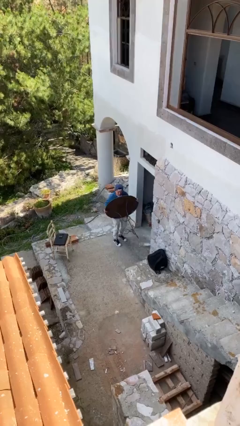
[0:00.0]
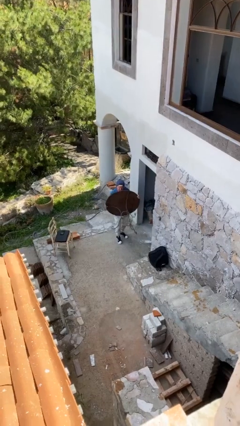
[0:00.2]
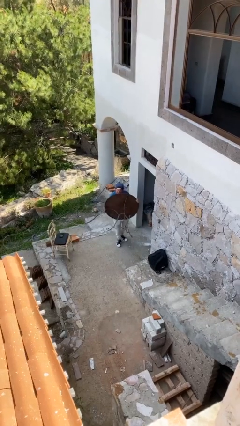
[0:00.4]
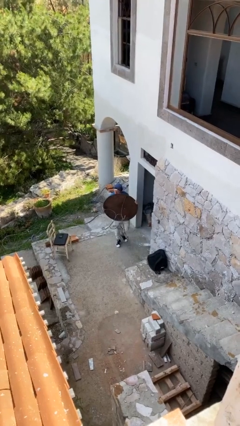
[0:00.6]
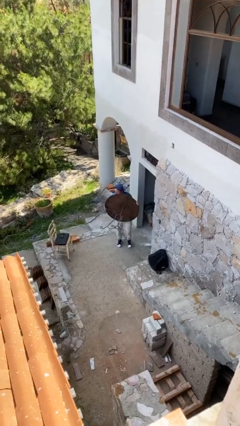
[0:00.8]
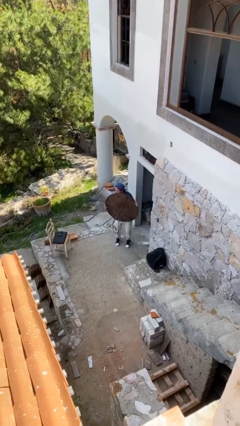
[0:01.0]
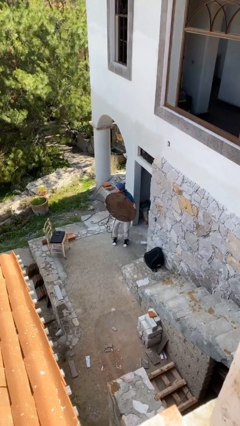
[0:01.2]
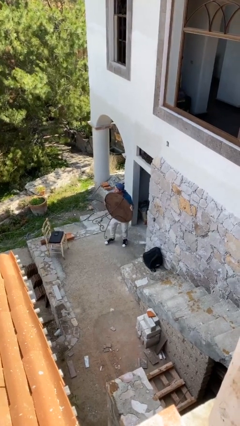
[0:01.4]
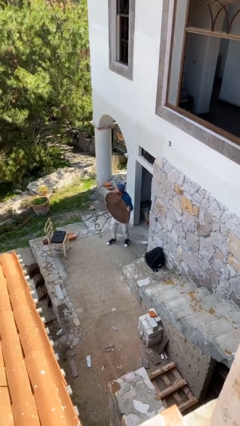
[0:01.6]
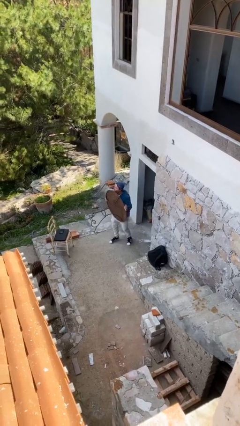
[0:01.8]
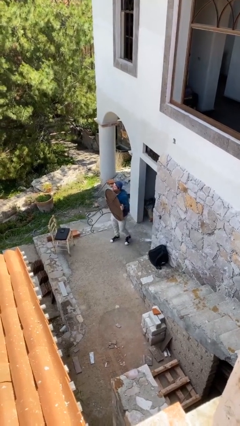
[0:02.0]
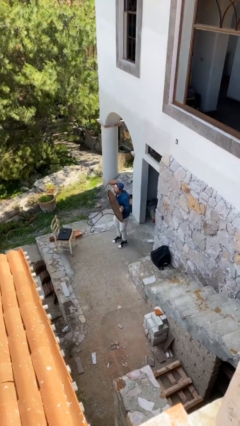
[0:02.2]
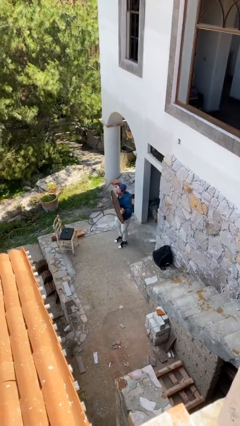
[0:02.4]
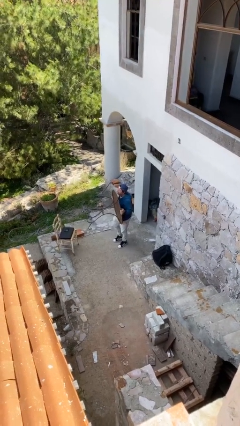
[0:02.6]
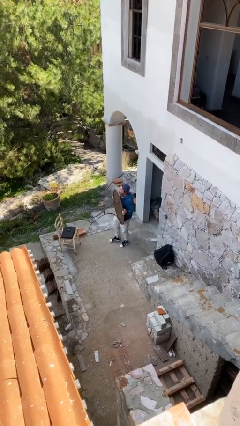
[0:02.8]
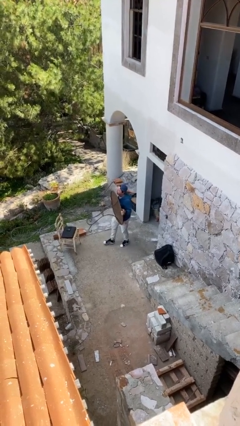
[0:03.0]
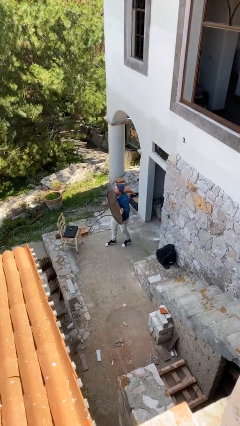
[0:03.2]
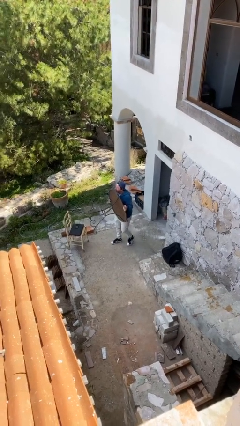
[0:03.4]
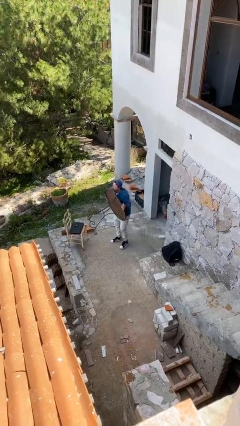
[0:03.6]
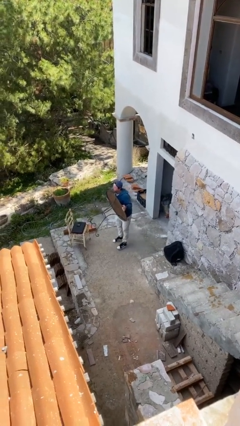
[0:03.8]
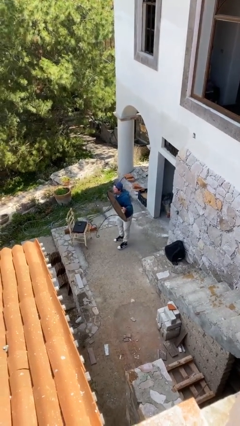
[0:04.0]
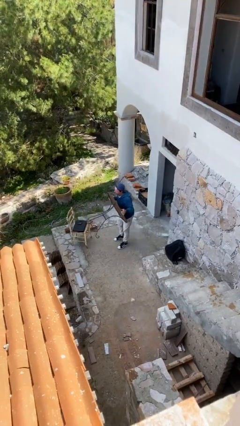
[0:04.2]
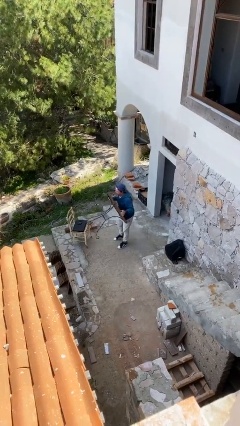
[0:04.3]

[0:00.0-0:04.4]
person carries heavy object

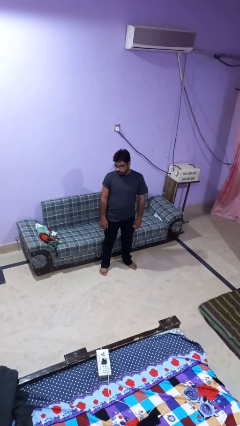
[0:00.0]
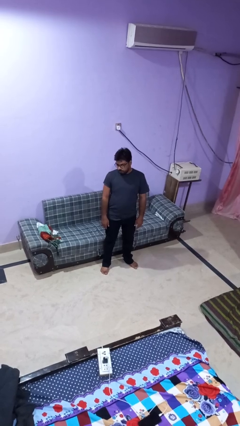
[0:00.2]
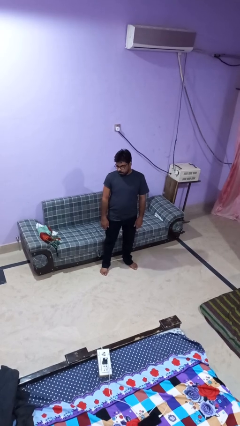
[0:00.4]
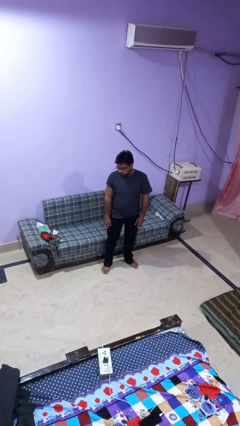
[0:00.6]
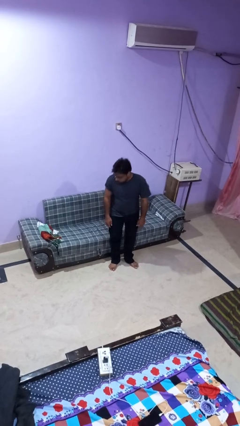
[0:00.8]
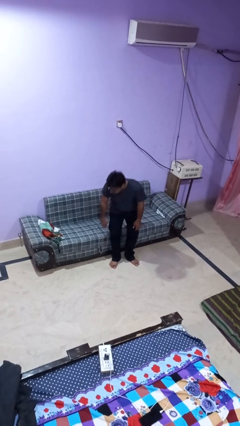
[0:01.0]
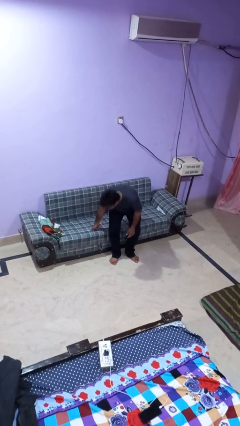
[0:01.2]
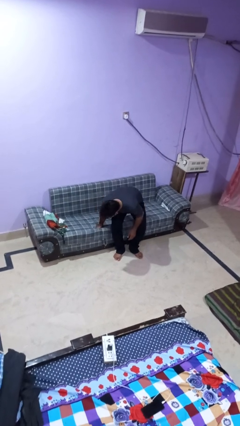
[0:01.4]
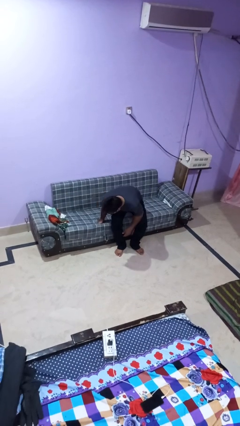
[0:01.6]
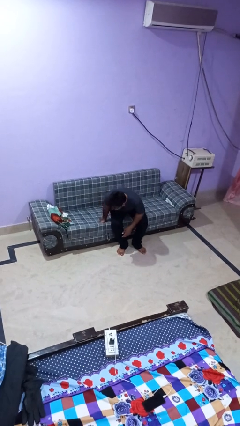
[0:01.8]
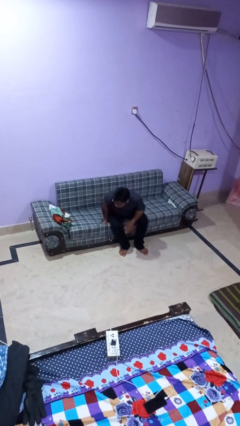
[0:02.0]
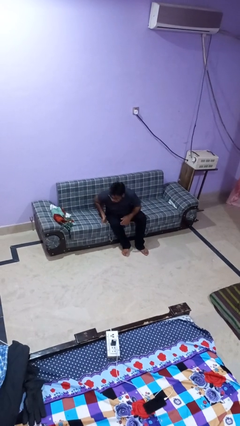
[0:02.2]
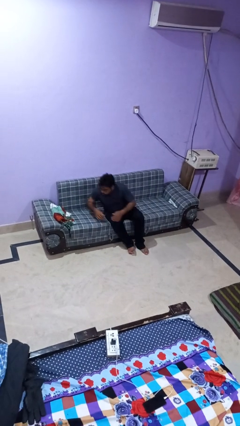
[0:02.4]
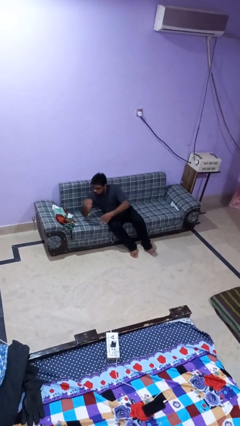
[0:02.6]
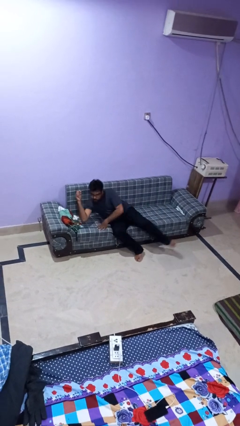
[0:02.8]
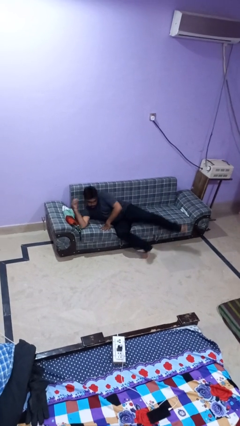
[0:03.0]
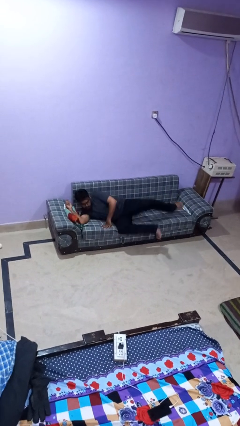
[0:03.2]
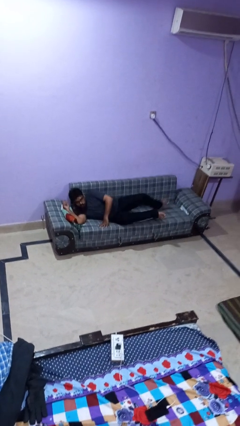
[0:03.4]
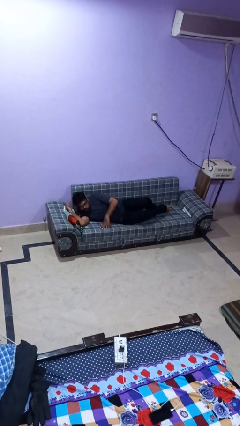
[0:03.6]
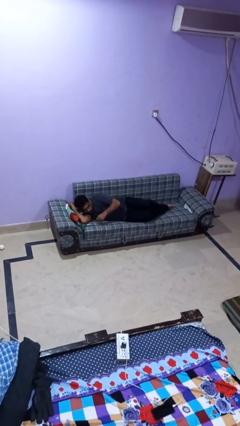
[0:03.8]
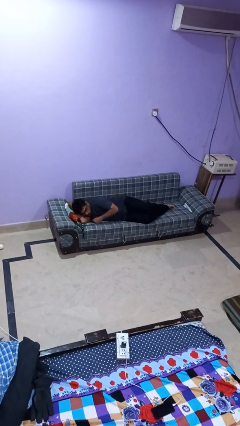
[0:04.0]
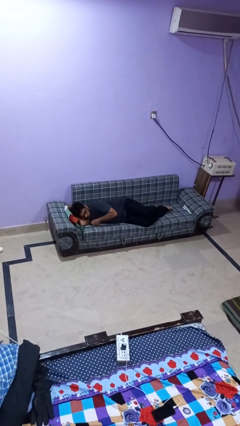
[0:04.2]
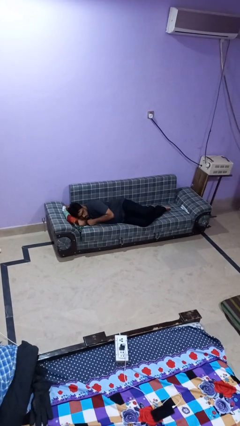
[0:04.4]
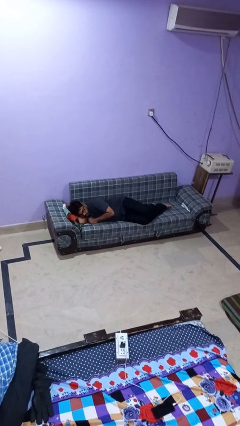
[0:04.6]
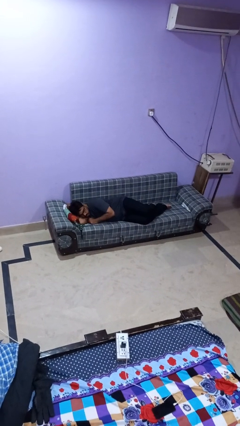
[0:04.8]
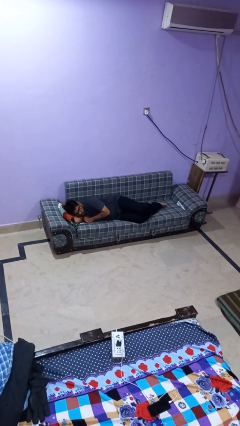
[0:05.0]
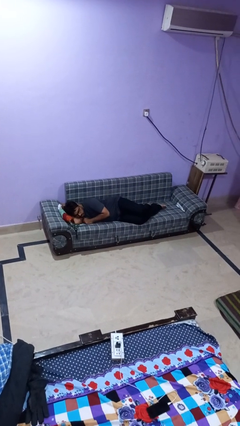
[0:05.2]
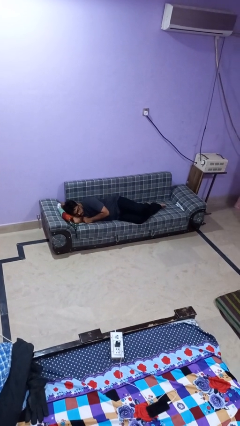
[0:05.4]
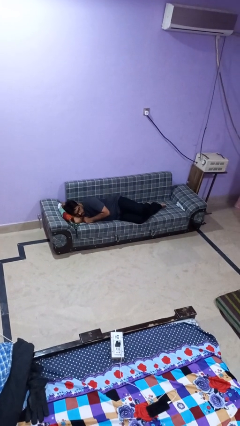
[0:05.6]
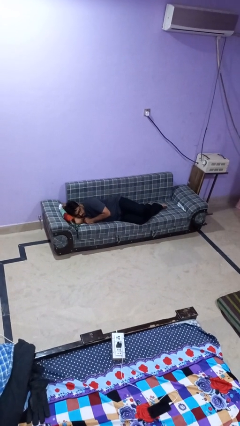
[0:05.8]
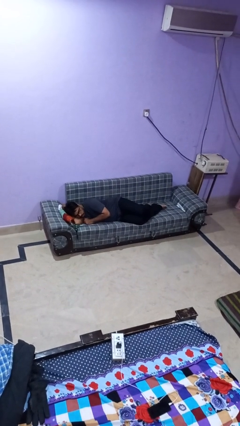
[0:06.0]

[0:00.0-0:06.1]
person lies down on couch

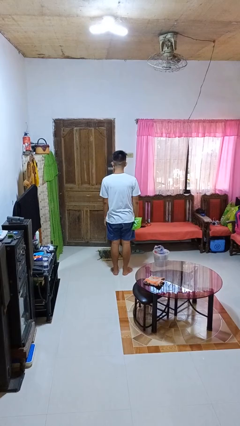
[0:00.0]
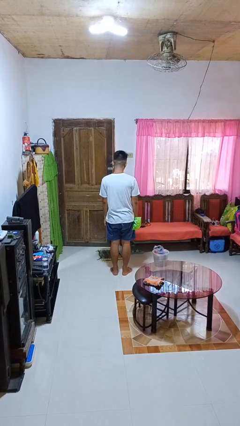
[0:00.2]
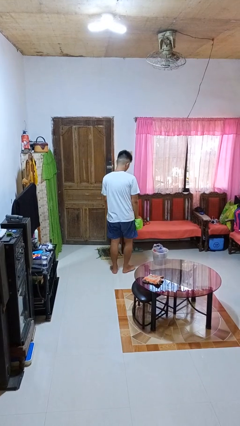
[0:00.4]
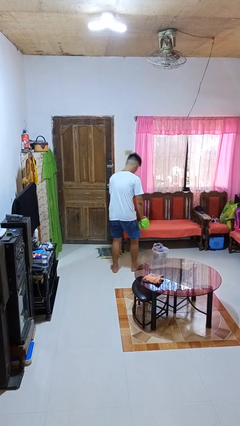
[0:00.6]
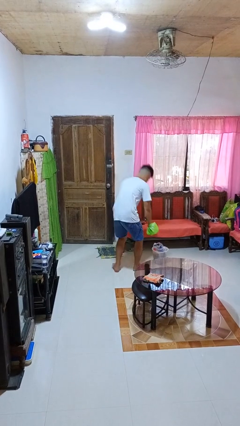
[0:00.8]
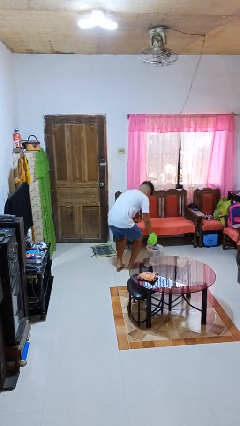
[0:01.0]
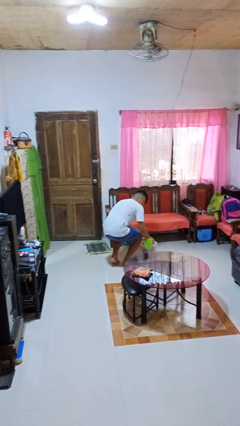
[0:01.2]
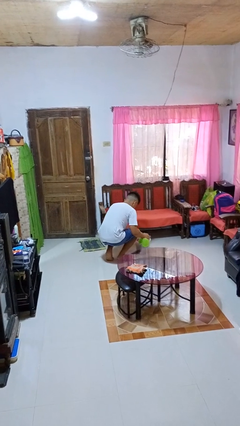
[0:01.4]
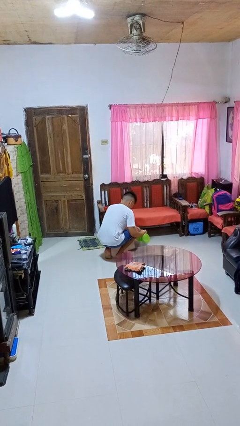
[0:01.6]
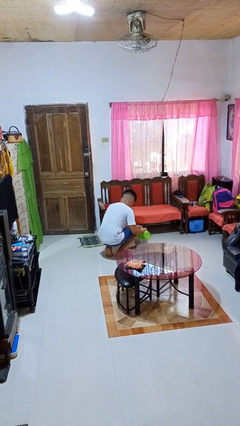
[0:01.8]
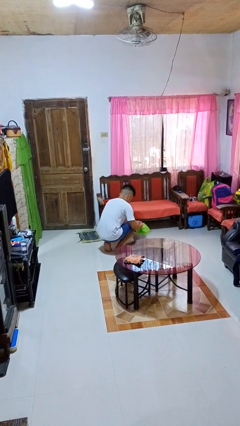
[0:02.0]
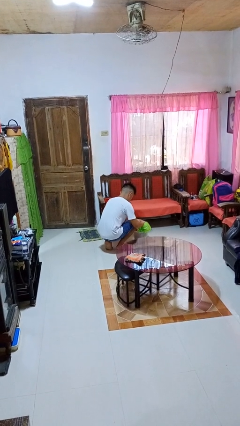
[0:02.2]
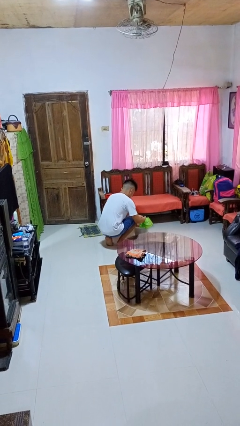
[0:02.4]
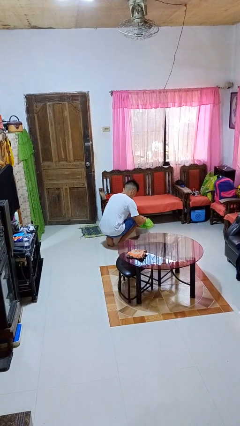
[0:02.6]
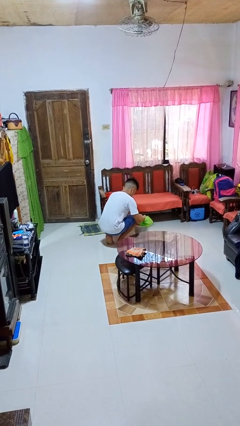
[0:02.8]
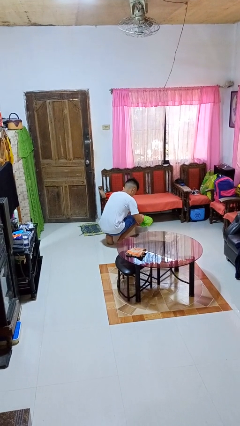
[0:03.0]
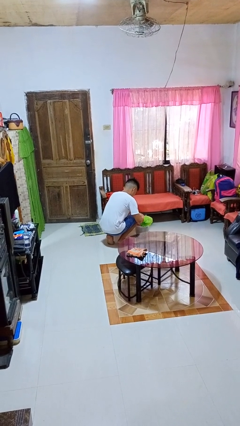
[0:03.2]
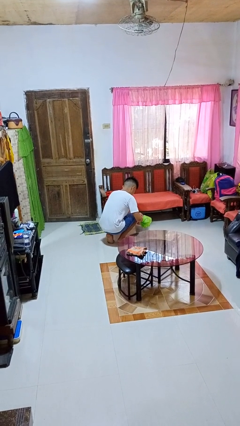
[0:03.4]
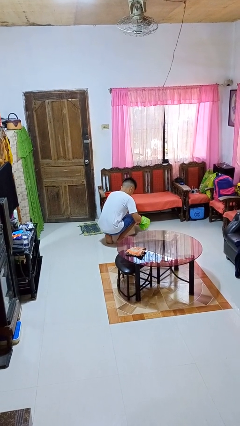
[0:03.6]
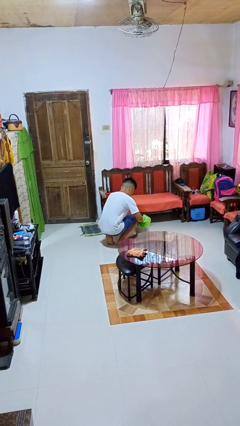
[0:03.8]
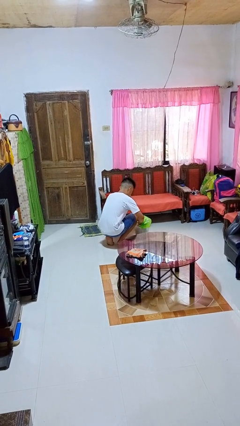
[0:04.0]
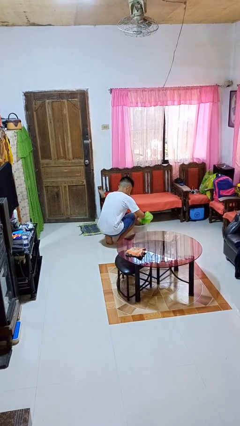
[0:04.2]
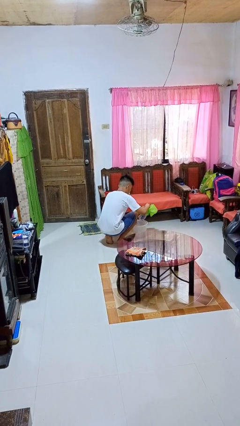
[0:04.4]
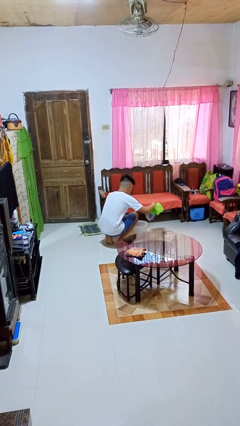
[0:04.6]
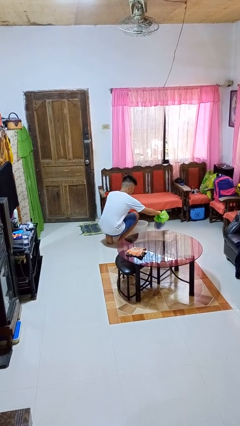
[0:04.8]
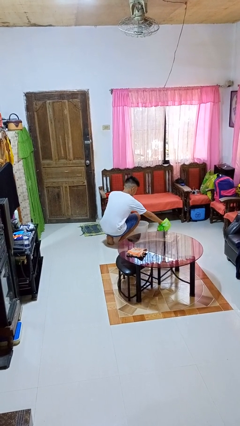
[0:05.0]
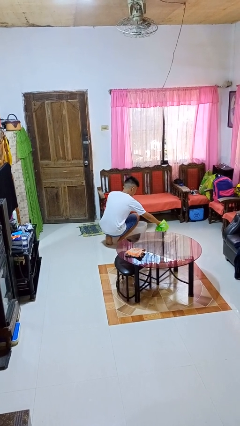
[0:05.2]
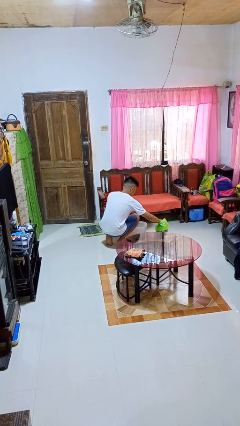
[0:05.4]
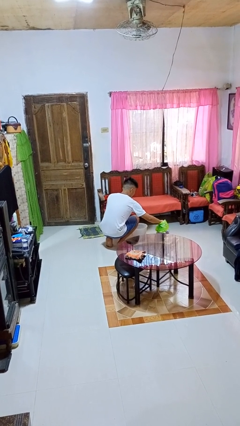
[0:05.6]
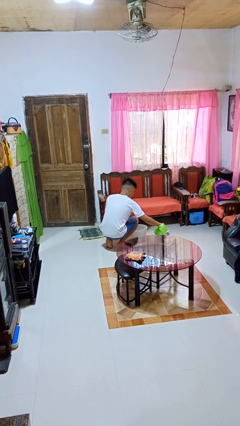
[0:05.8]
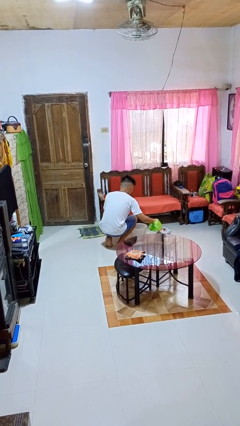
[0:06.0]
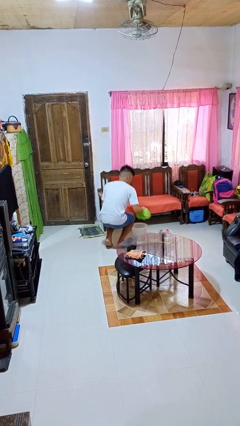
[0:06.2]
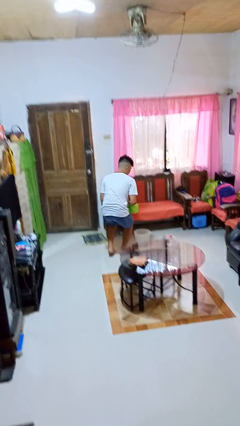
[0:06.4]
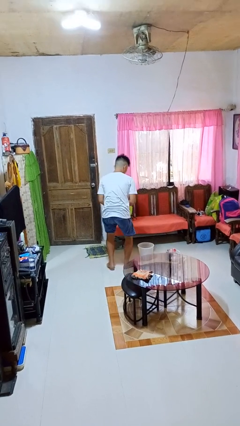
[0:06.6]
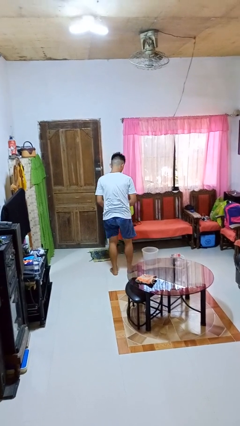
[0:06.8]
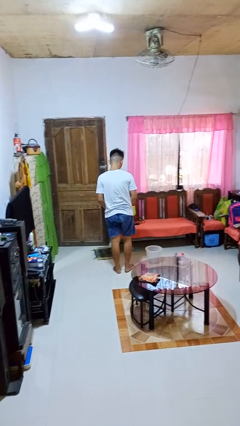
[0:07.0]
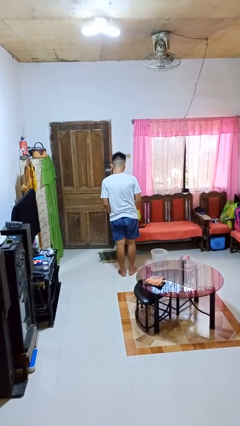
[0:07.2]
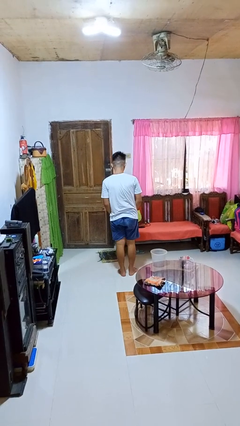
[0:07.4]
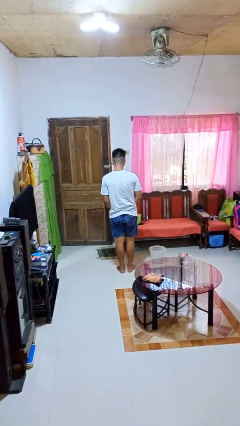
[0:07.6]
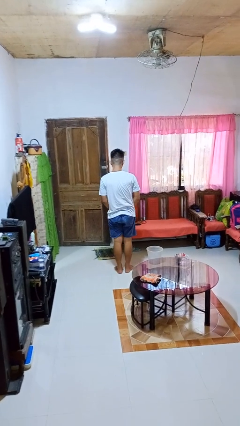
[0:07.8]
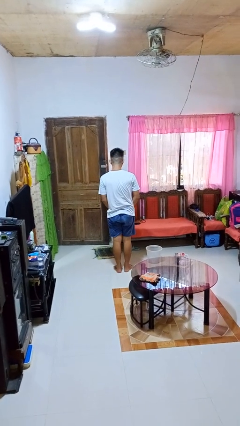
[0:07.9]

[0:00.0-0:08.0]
person removes trashbag from trashcan
